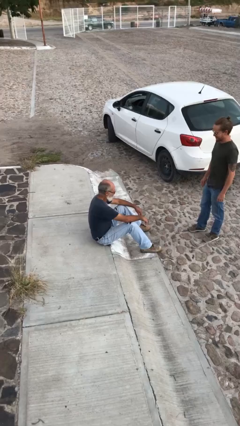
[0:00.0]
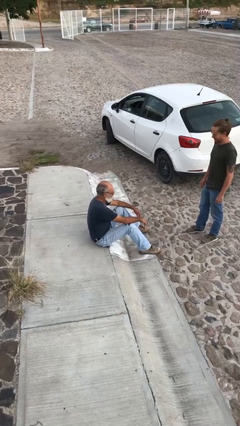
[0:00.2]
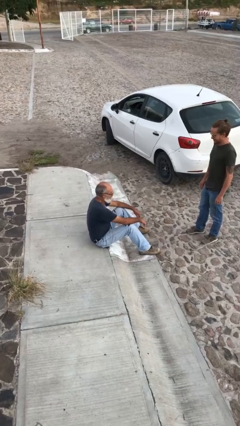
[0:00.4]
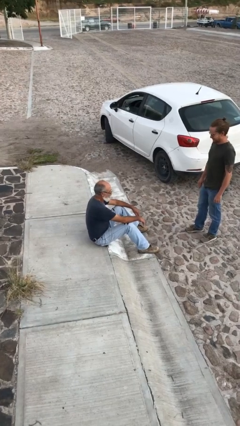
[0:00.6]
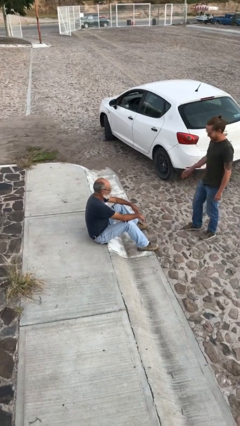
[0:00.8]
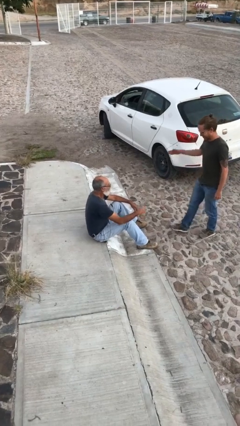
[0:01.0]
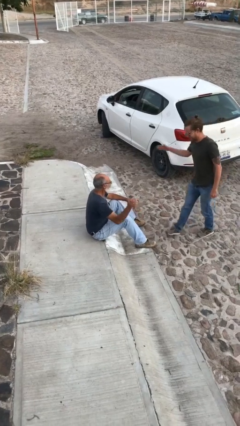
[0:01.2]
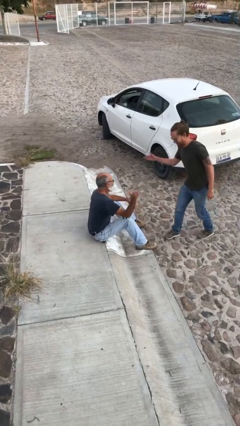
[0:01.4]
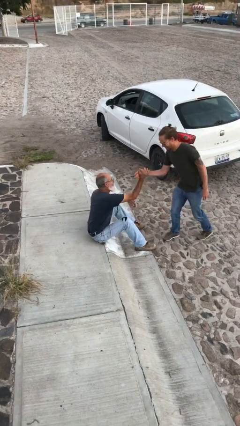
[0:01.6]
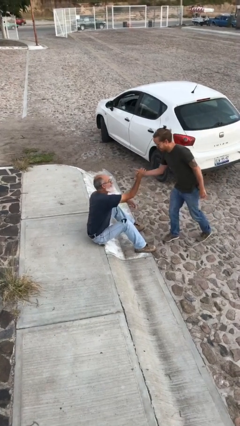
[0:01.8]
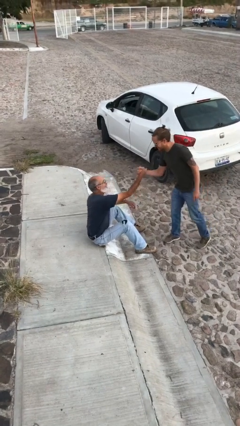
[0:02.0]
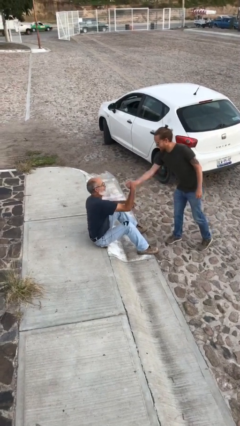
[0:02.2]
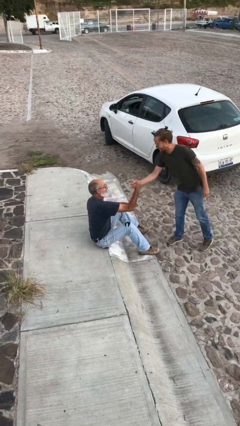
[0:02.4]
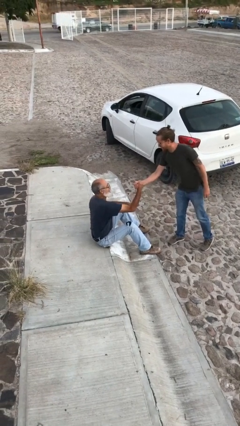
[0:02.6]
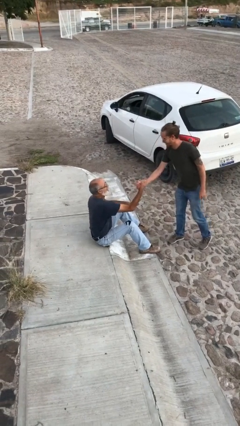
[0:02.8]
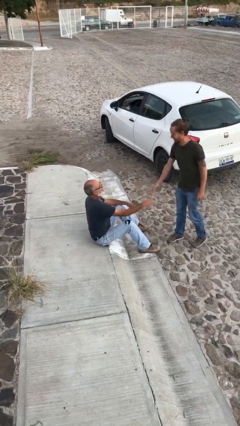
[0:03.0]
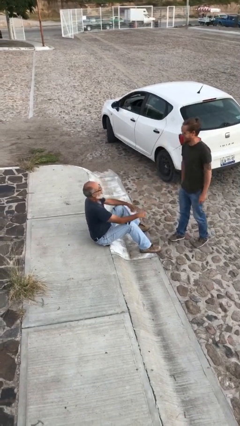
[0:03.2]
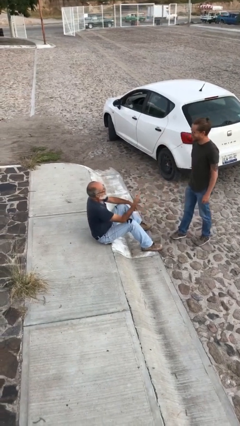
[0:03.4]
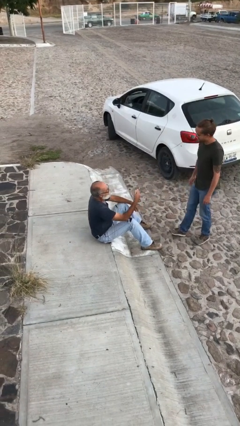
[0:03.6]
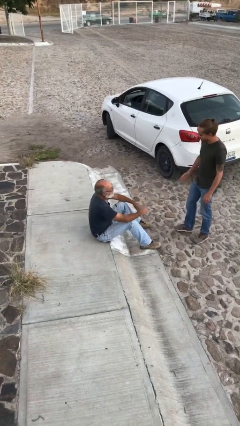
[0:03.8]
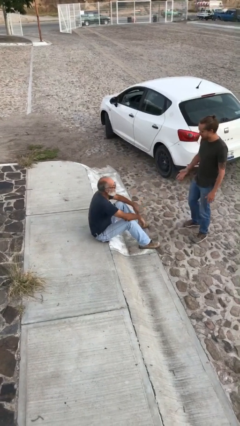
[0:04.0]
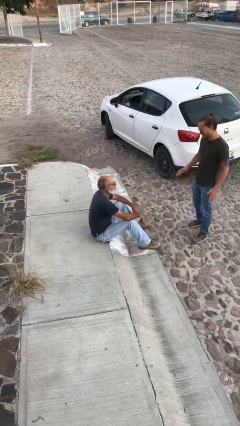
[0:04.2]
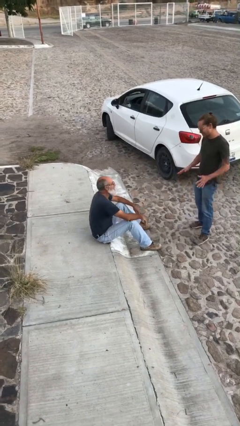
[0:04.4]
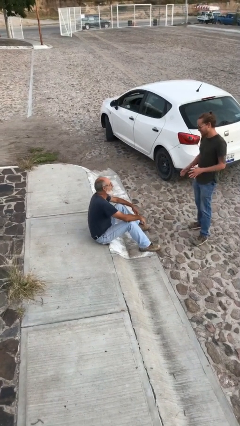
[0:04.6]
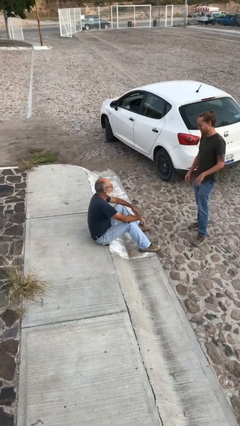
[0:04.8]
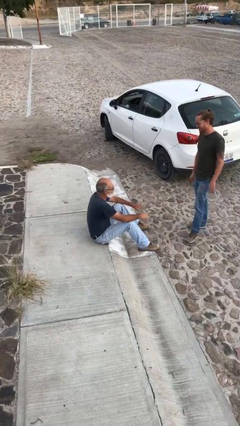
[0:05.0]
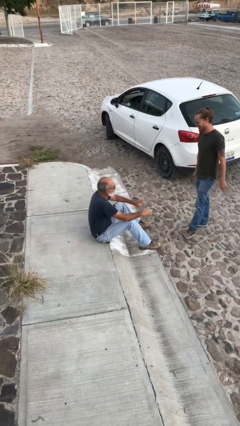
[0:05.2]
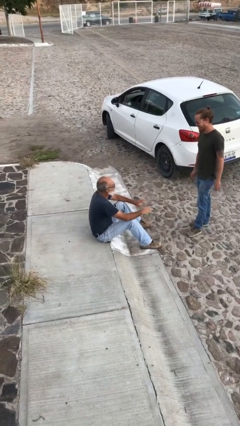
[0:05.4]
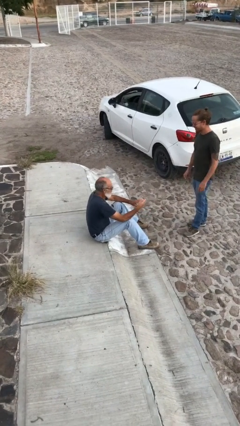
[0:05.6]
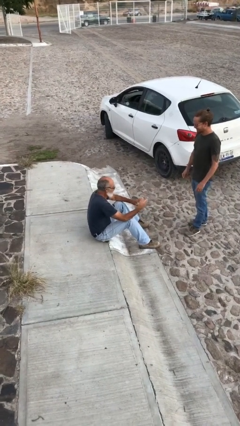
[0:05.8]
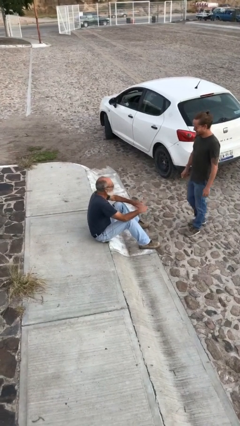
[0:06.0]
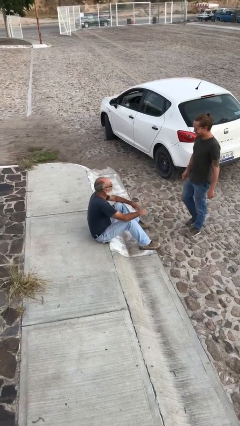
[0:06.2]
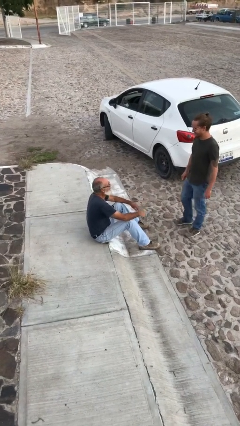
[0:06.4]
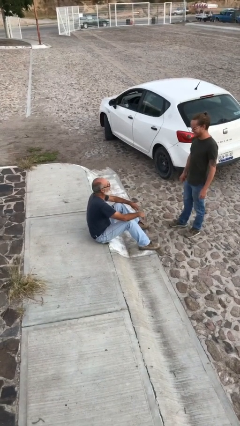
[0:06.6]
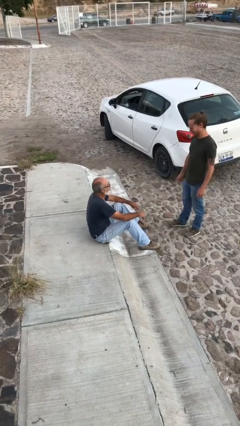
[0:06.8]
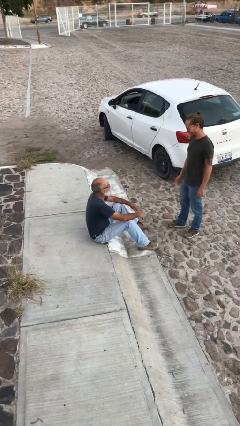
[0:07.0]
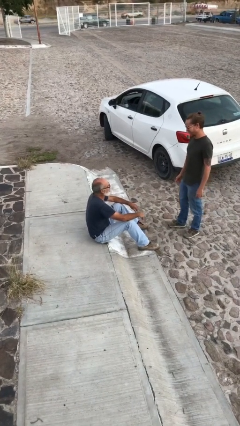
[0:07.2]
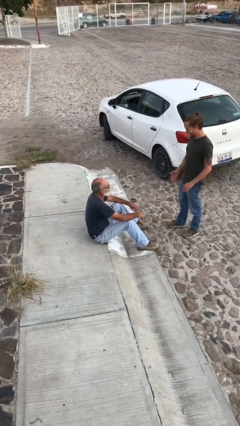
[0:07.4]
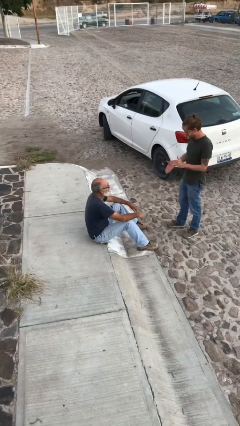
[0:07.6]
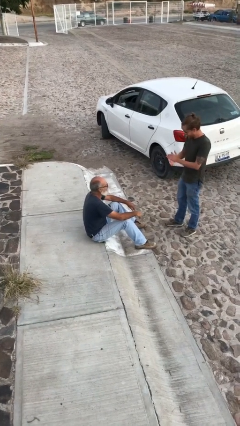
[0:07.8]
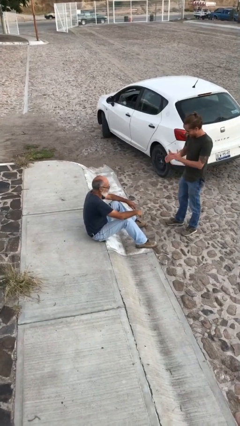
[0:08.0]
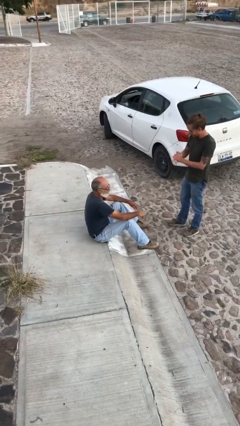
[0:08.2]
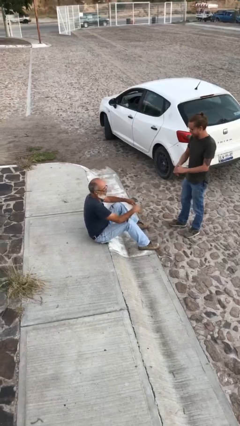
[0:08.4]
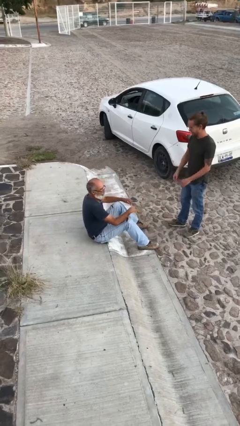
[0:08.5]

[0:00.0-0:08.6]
person shakes hand

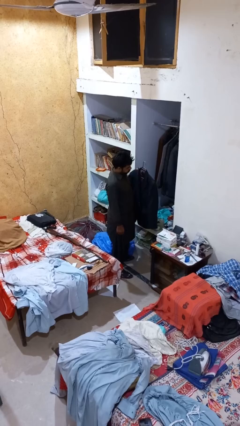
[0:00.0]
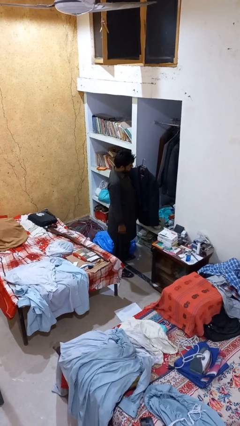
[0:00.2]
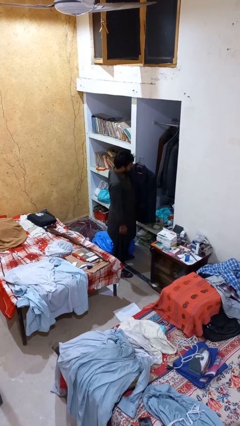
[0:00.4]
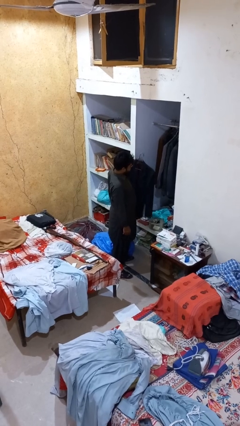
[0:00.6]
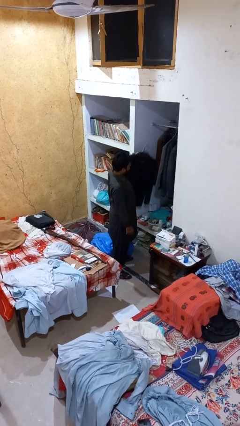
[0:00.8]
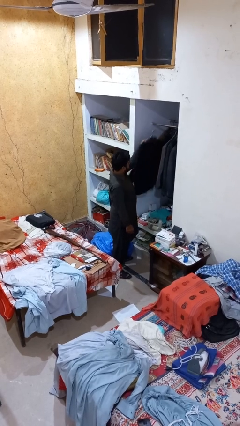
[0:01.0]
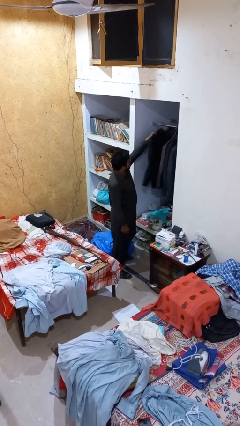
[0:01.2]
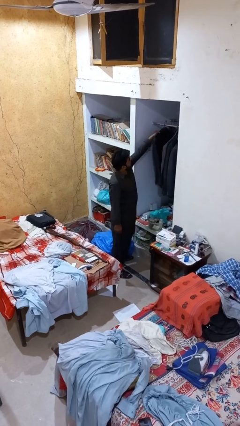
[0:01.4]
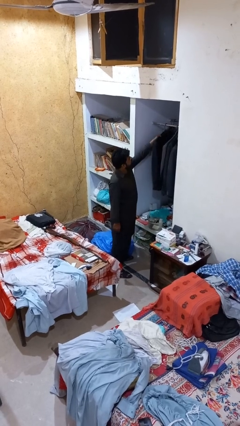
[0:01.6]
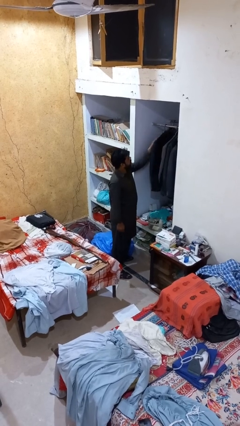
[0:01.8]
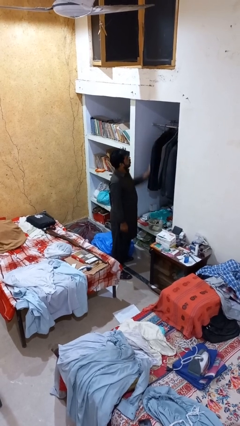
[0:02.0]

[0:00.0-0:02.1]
person puts clothes into closet

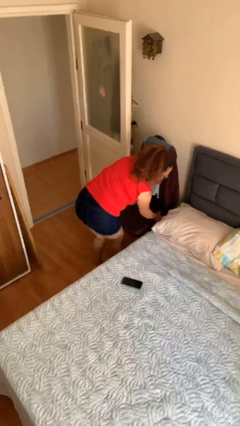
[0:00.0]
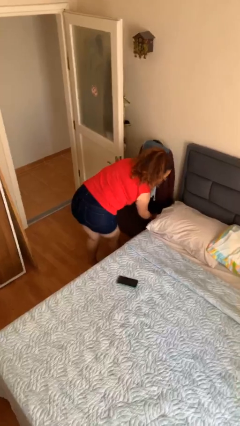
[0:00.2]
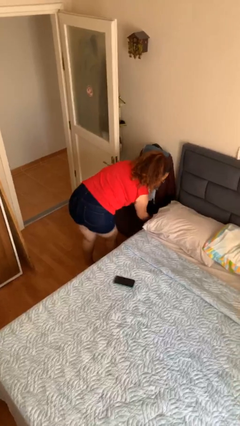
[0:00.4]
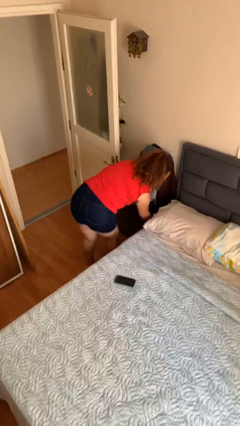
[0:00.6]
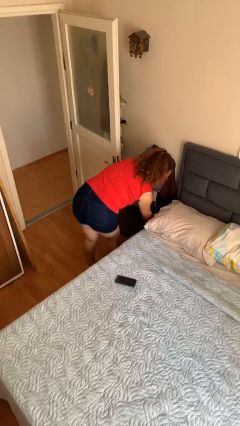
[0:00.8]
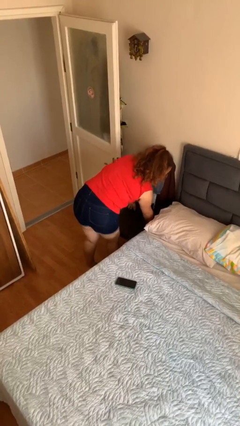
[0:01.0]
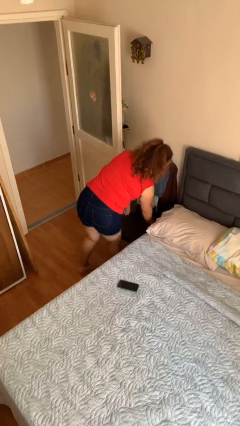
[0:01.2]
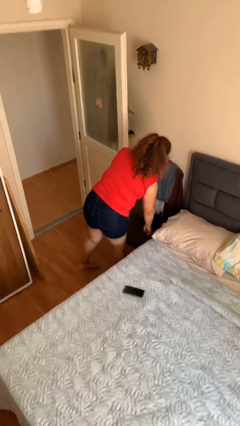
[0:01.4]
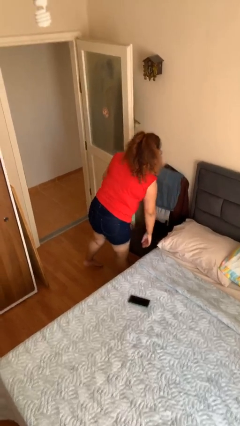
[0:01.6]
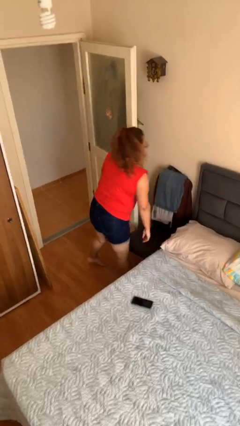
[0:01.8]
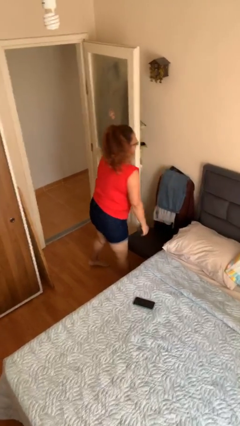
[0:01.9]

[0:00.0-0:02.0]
person puts down object on floor

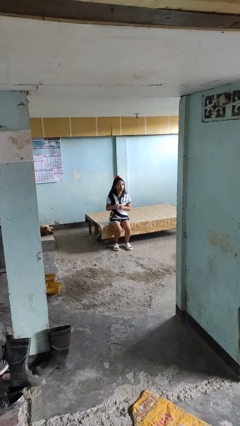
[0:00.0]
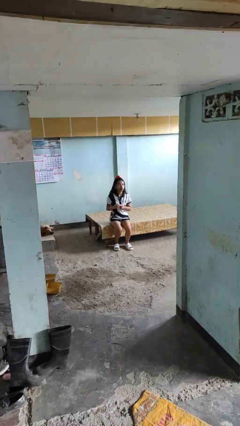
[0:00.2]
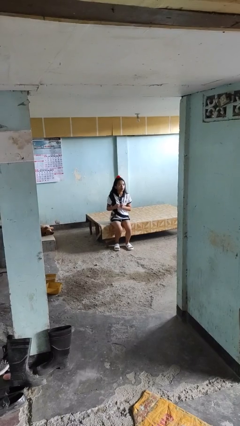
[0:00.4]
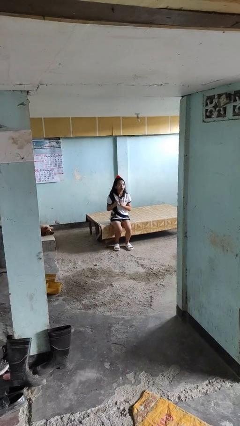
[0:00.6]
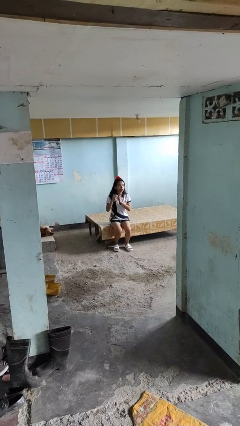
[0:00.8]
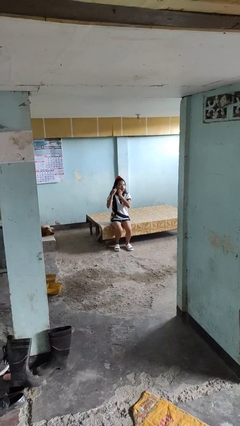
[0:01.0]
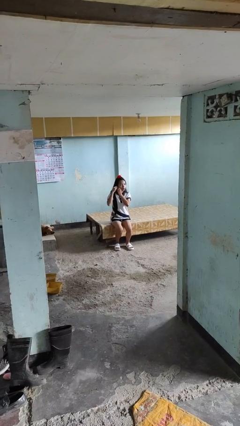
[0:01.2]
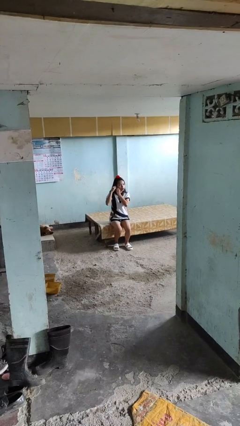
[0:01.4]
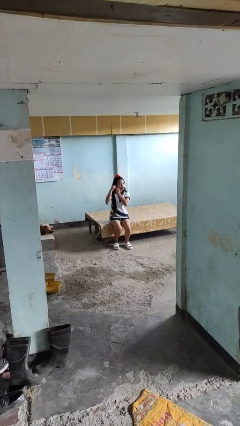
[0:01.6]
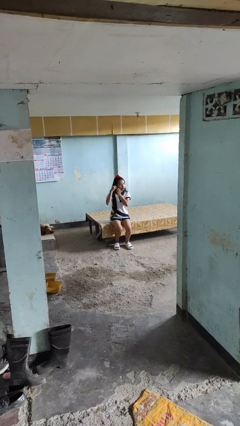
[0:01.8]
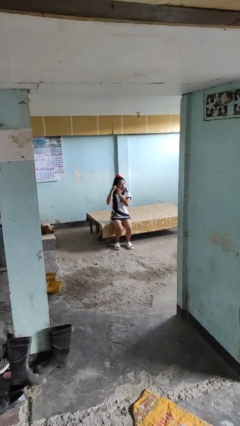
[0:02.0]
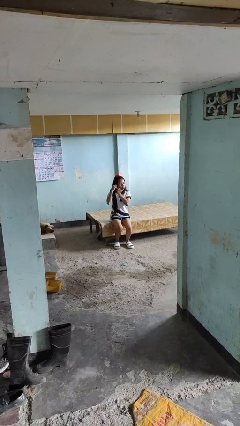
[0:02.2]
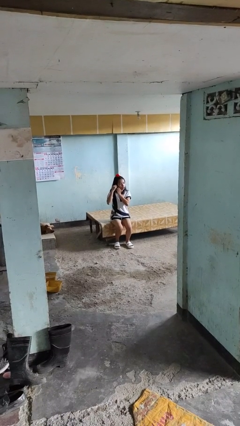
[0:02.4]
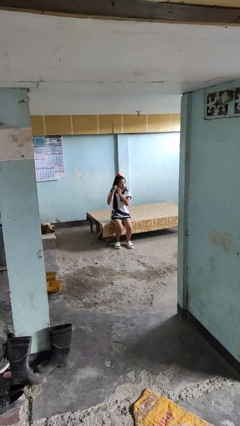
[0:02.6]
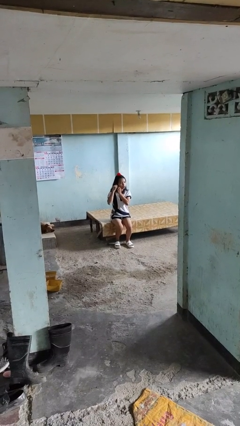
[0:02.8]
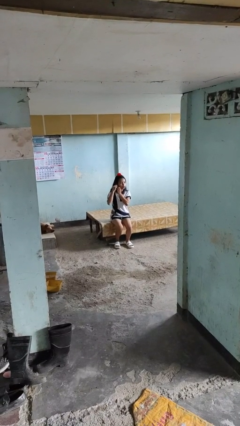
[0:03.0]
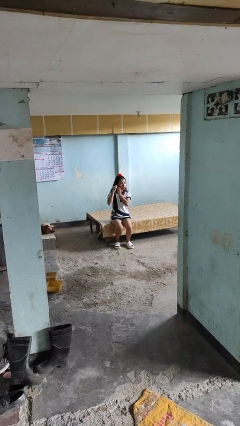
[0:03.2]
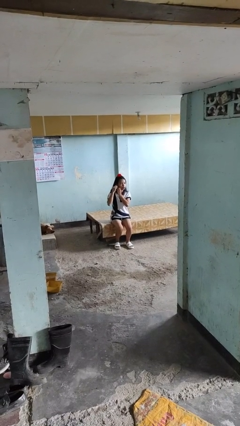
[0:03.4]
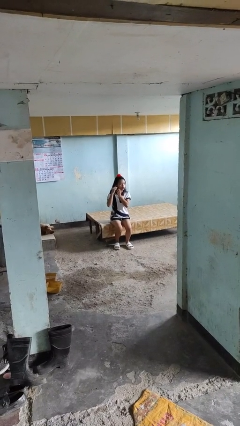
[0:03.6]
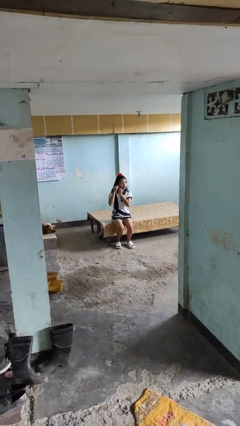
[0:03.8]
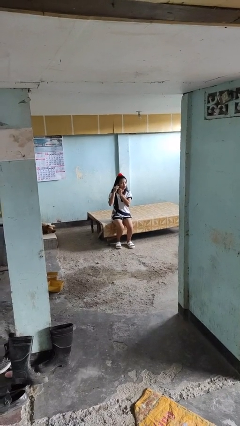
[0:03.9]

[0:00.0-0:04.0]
person puts on earrings

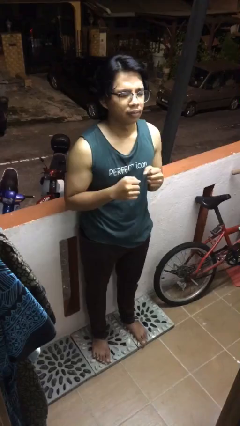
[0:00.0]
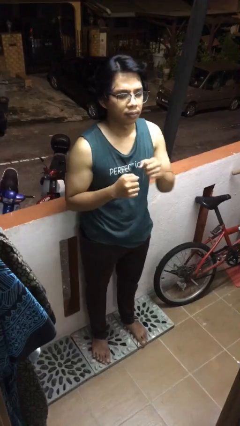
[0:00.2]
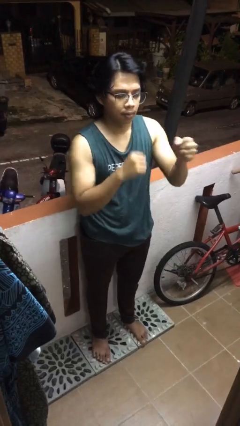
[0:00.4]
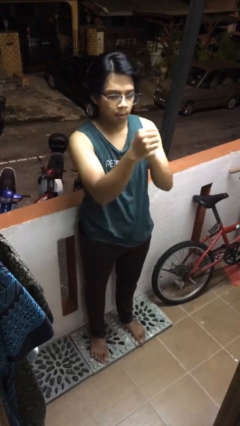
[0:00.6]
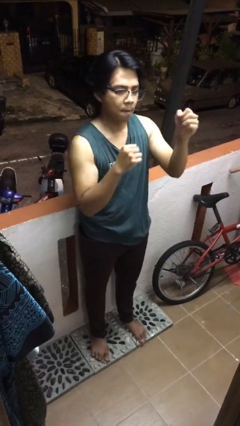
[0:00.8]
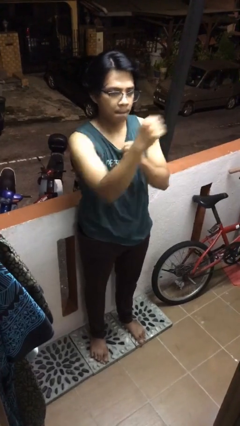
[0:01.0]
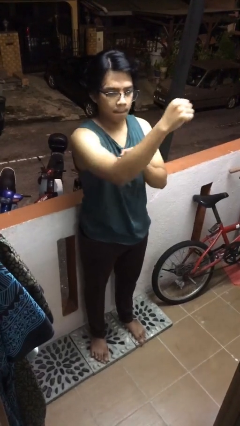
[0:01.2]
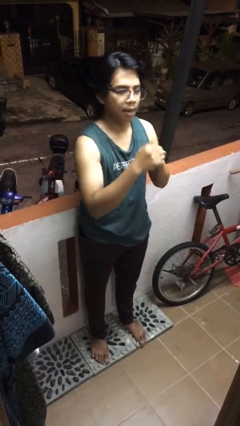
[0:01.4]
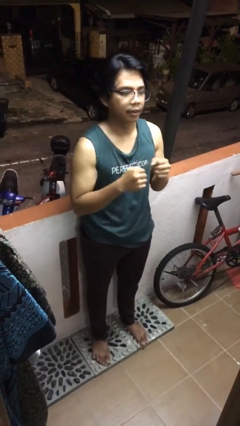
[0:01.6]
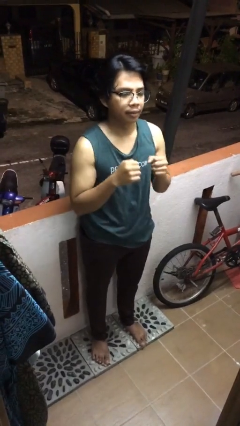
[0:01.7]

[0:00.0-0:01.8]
person punches
